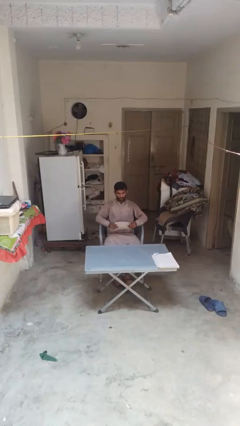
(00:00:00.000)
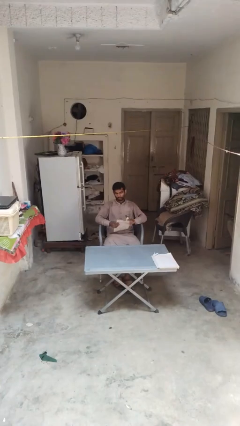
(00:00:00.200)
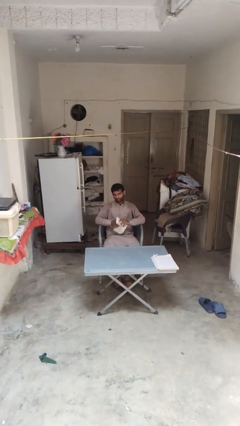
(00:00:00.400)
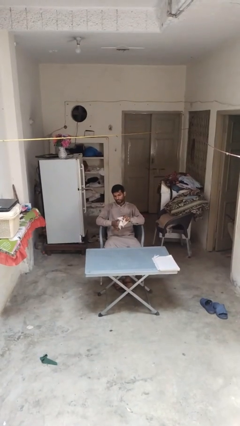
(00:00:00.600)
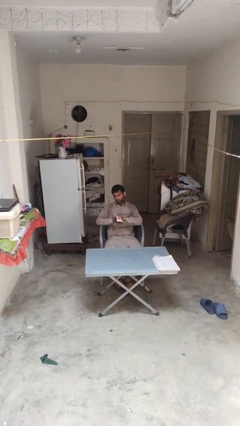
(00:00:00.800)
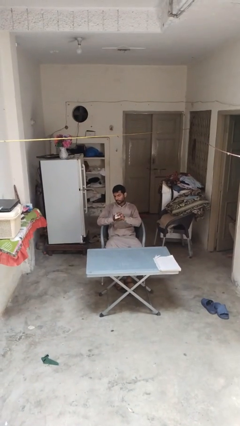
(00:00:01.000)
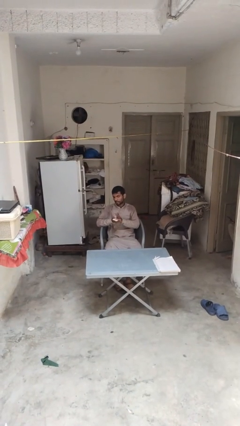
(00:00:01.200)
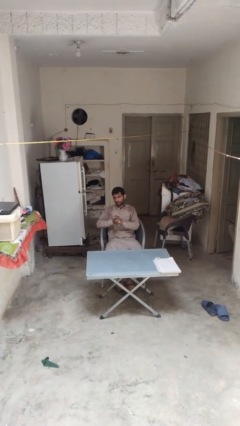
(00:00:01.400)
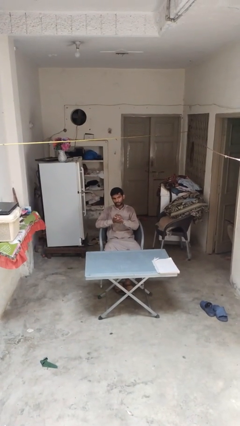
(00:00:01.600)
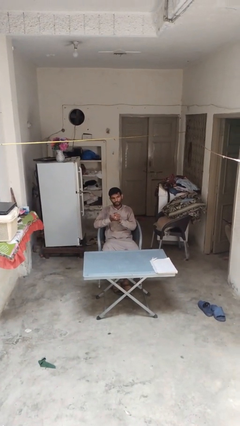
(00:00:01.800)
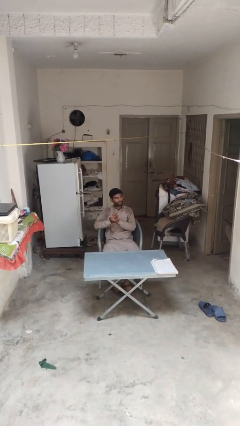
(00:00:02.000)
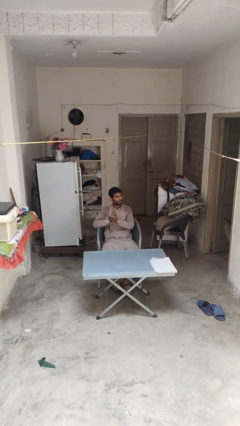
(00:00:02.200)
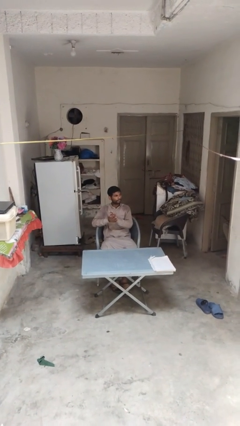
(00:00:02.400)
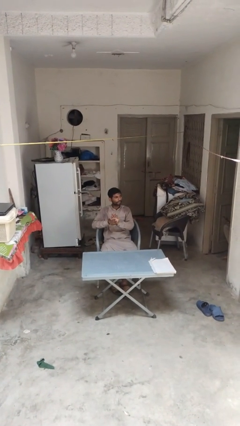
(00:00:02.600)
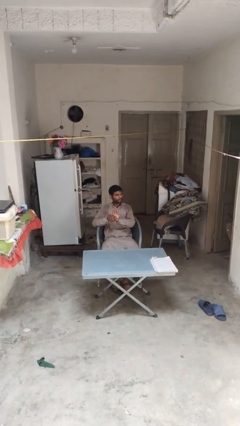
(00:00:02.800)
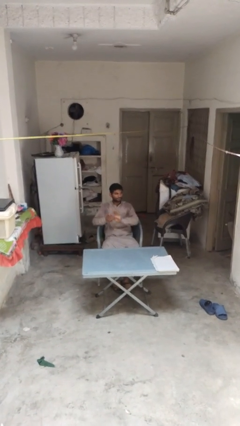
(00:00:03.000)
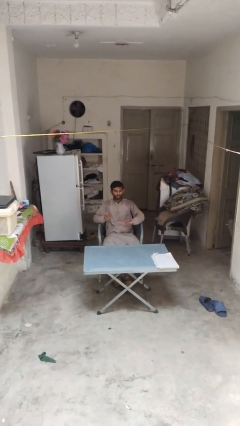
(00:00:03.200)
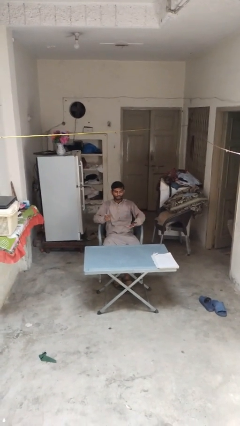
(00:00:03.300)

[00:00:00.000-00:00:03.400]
person crumples paper

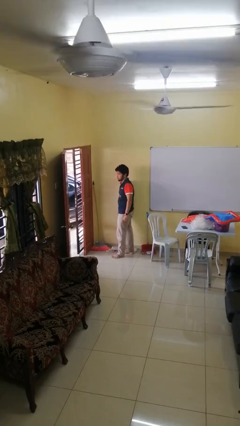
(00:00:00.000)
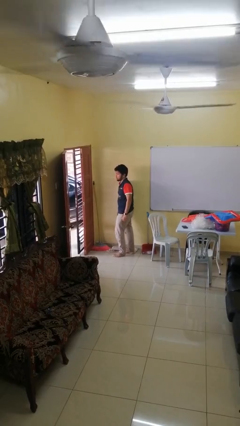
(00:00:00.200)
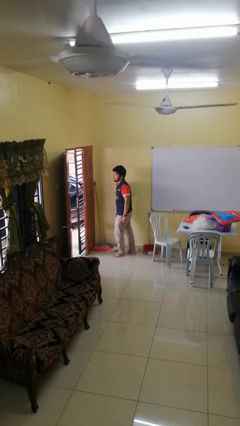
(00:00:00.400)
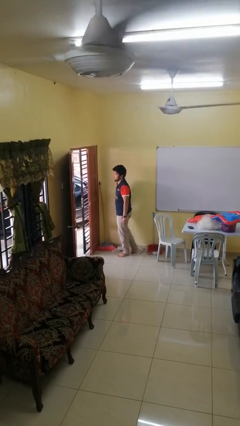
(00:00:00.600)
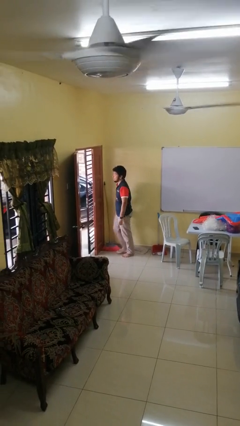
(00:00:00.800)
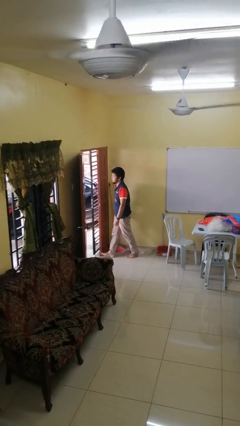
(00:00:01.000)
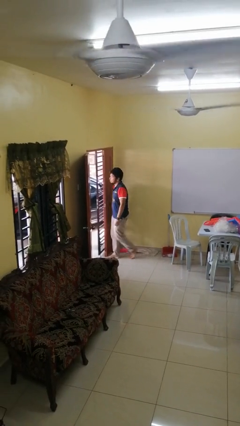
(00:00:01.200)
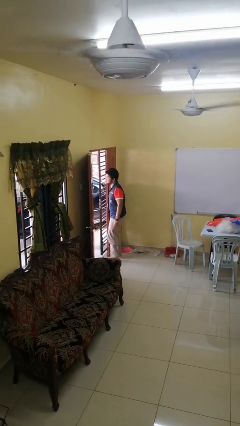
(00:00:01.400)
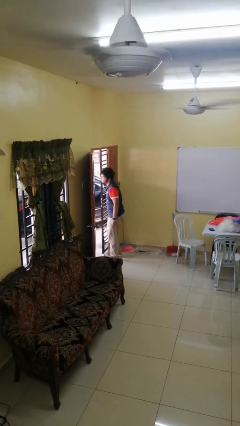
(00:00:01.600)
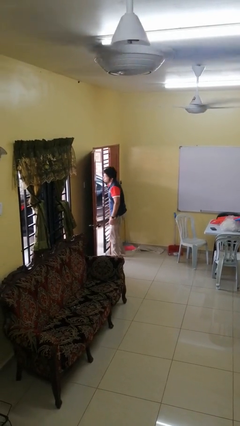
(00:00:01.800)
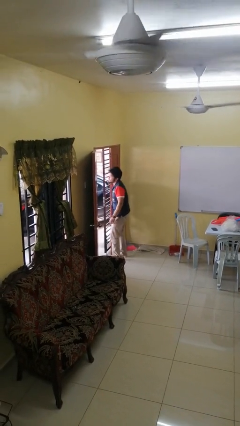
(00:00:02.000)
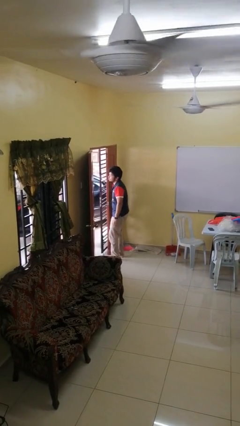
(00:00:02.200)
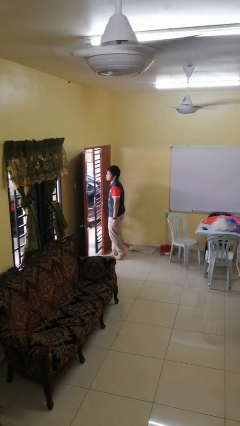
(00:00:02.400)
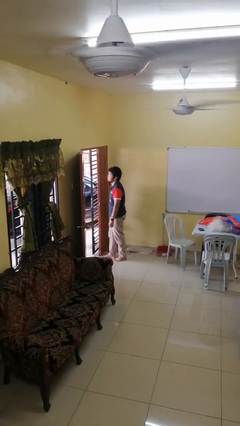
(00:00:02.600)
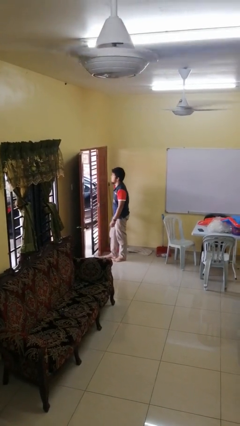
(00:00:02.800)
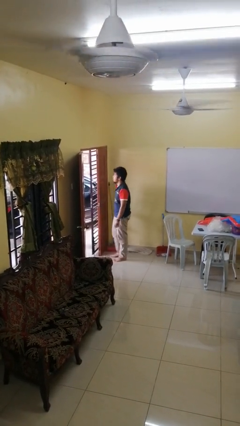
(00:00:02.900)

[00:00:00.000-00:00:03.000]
person bumps into wall

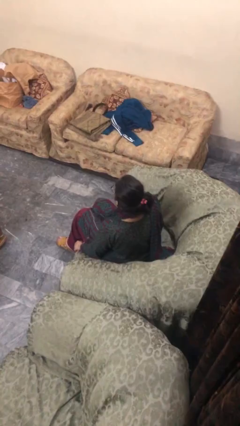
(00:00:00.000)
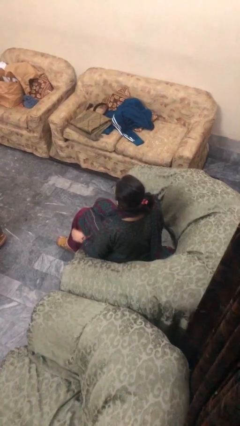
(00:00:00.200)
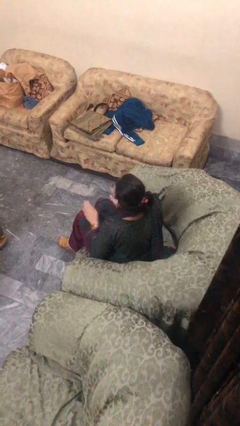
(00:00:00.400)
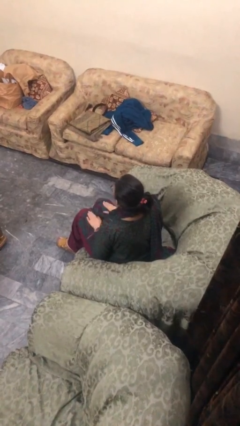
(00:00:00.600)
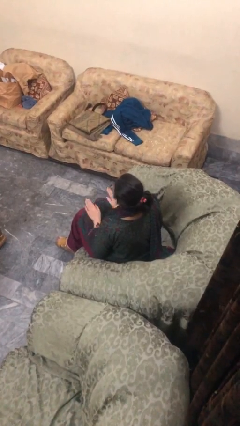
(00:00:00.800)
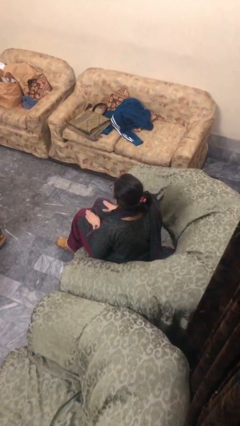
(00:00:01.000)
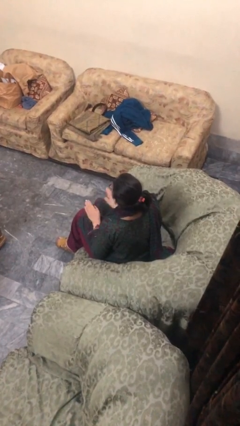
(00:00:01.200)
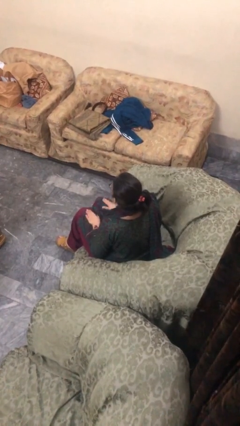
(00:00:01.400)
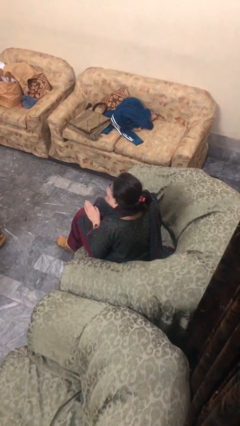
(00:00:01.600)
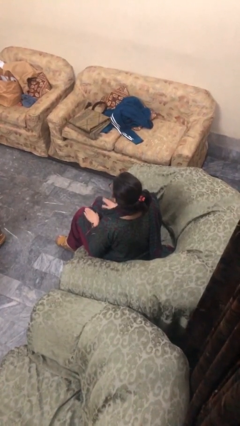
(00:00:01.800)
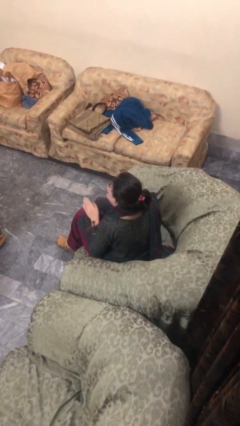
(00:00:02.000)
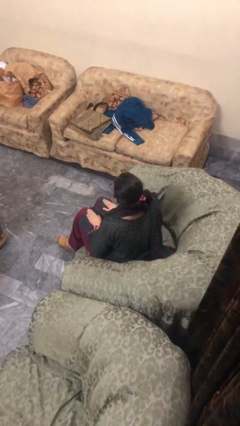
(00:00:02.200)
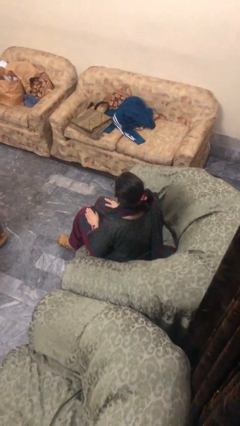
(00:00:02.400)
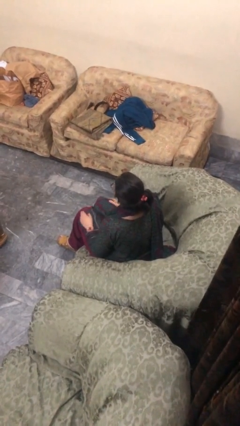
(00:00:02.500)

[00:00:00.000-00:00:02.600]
person slaps hands on thighs

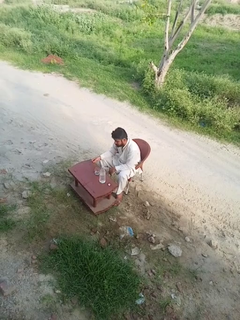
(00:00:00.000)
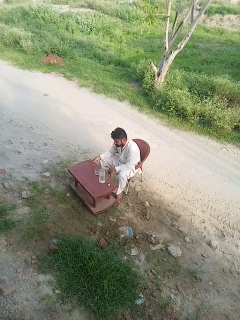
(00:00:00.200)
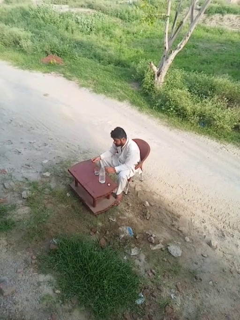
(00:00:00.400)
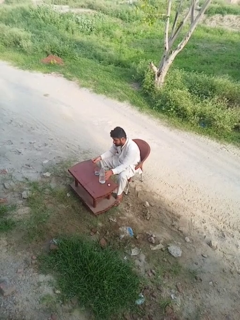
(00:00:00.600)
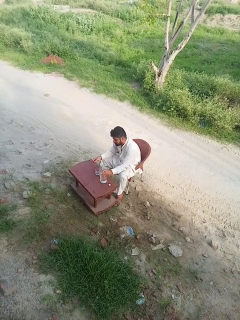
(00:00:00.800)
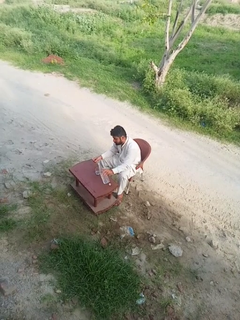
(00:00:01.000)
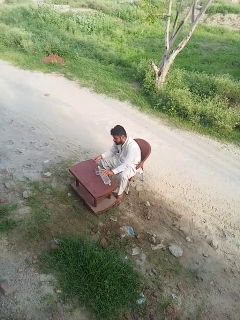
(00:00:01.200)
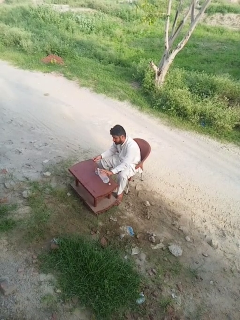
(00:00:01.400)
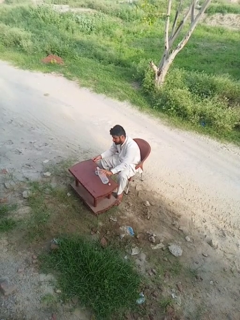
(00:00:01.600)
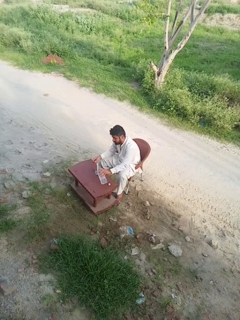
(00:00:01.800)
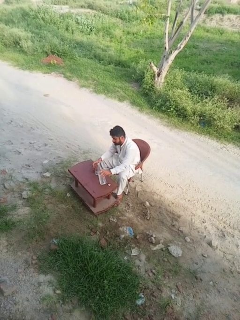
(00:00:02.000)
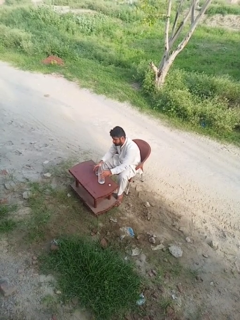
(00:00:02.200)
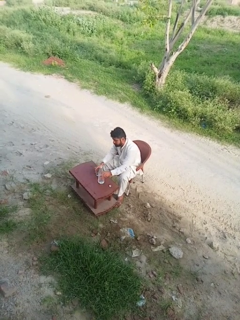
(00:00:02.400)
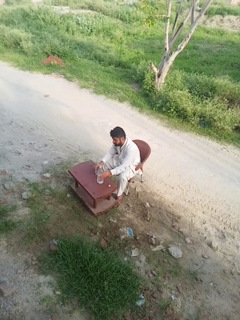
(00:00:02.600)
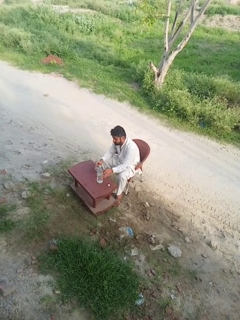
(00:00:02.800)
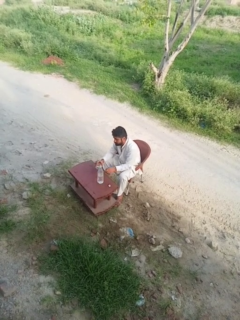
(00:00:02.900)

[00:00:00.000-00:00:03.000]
person picks up object from table

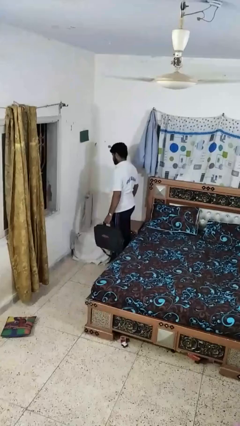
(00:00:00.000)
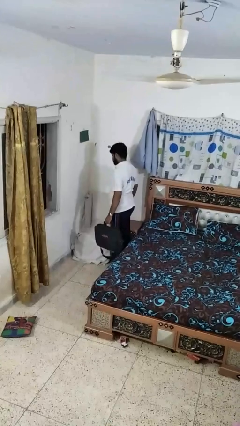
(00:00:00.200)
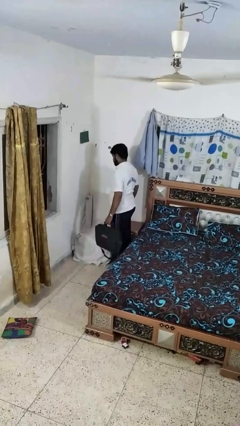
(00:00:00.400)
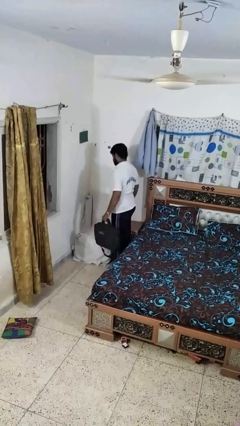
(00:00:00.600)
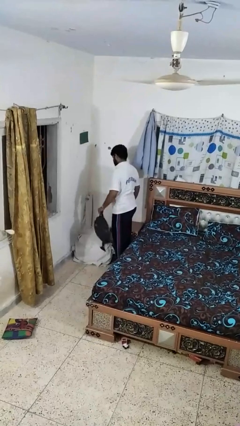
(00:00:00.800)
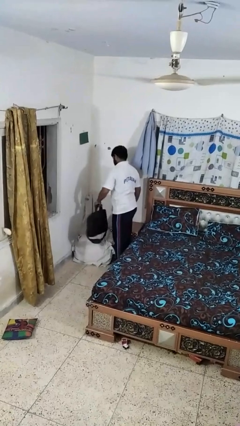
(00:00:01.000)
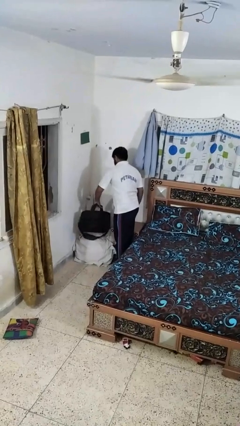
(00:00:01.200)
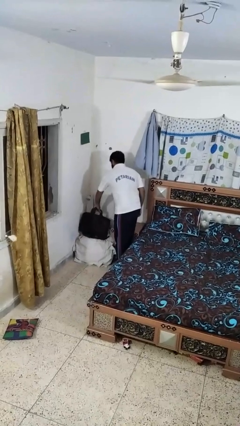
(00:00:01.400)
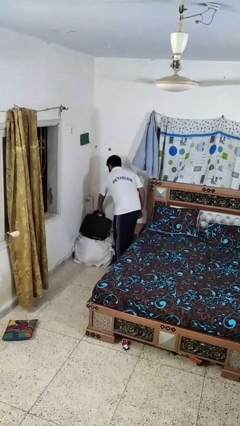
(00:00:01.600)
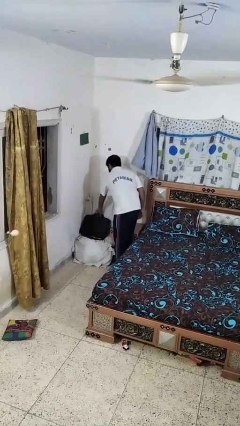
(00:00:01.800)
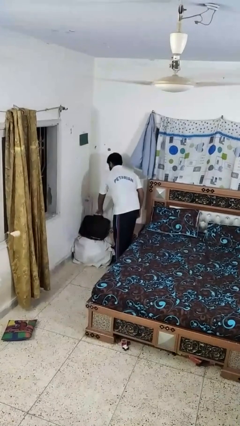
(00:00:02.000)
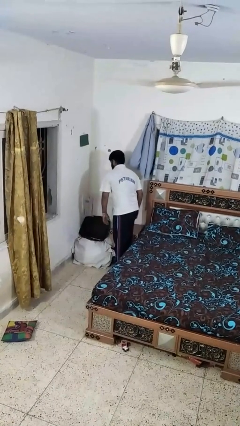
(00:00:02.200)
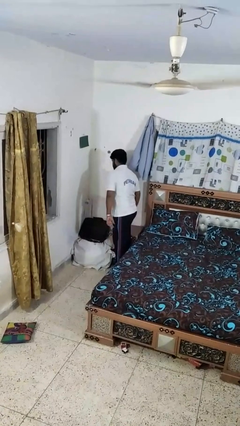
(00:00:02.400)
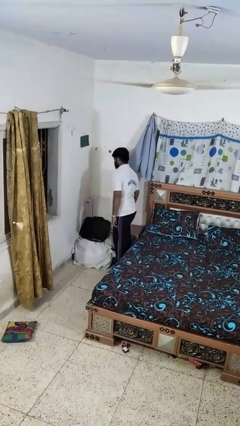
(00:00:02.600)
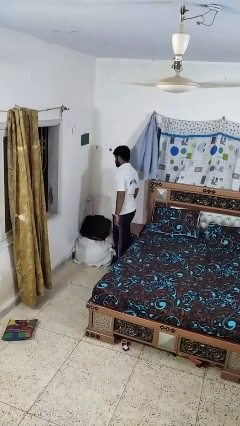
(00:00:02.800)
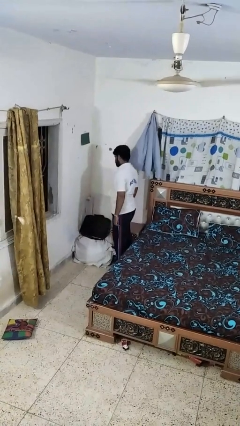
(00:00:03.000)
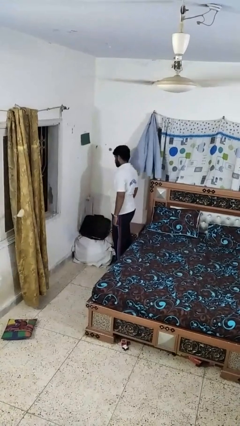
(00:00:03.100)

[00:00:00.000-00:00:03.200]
person puts down object on couch

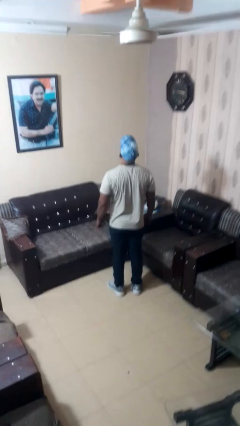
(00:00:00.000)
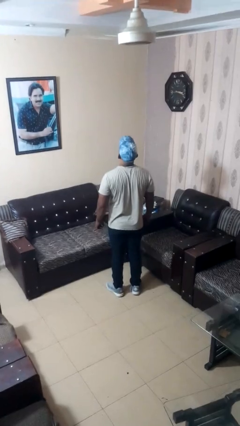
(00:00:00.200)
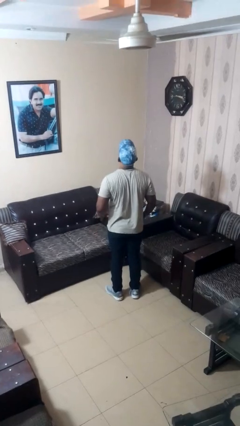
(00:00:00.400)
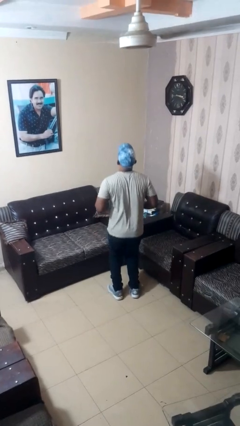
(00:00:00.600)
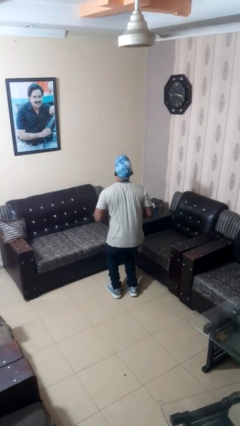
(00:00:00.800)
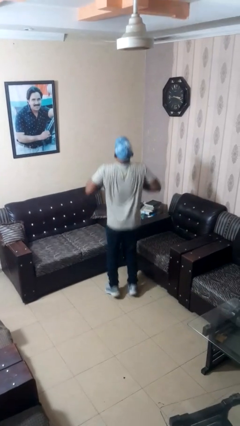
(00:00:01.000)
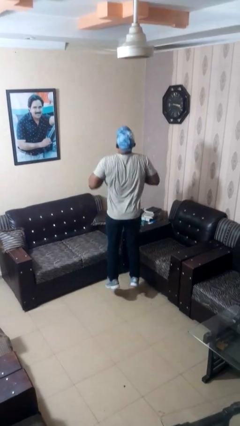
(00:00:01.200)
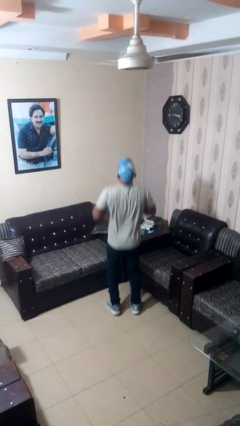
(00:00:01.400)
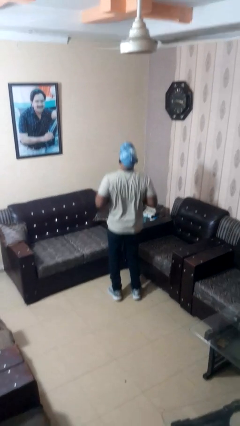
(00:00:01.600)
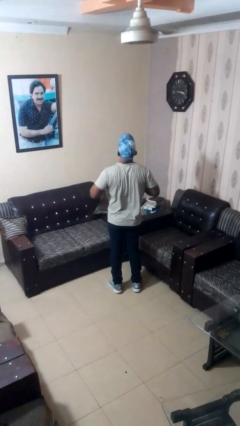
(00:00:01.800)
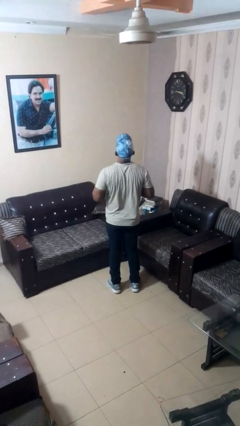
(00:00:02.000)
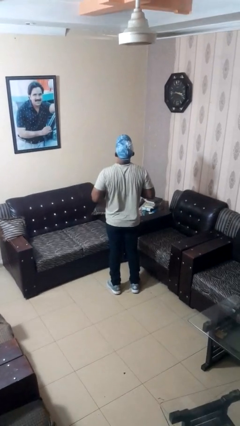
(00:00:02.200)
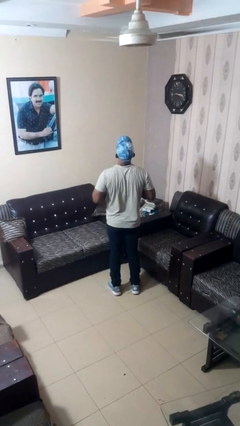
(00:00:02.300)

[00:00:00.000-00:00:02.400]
person jumps

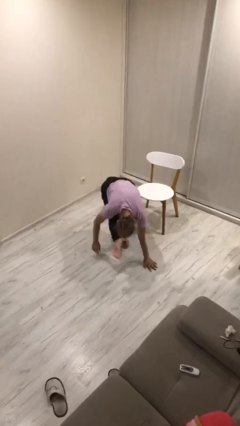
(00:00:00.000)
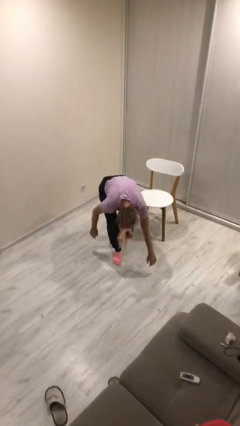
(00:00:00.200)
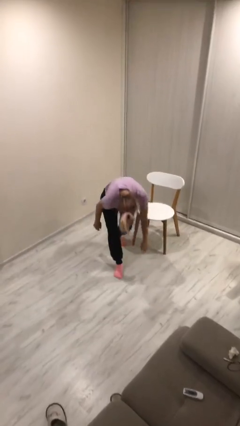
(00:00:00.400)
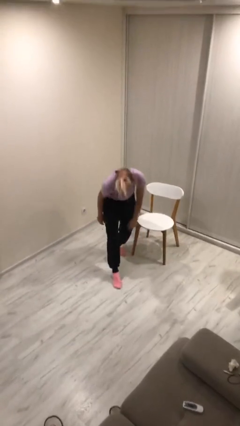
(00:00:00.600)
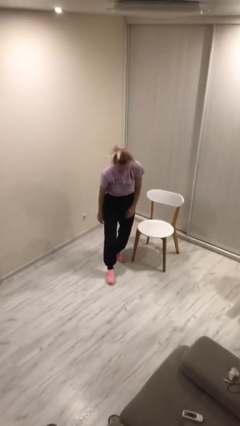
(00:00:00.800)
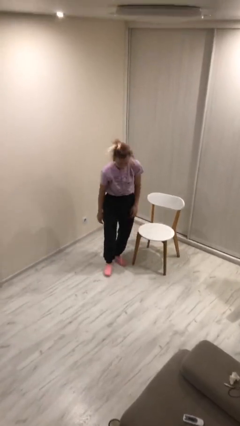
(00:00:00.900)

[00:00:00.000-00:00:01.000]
person stands up from floor
